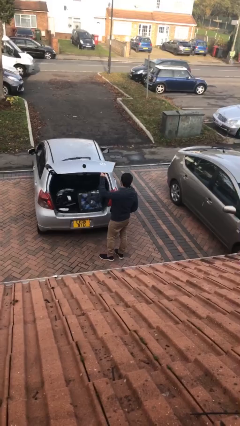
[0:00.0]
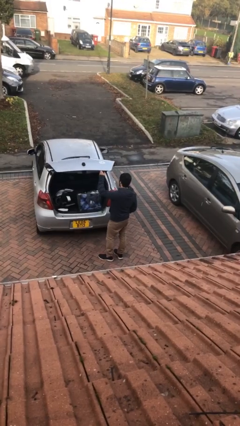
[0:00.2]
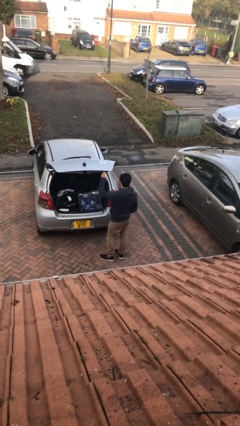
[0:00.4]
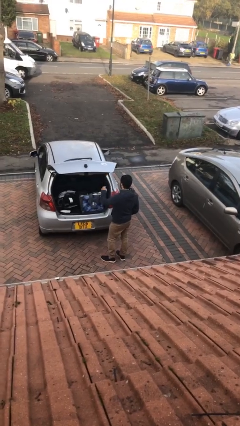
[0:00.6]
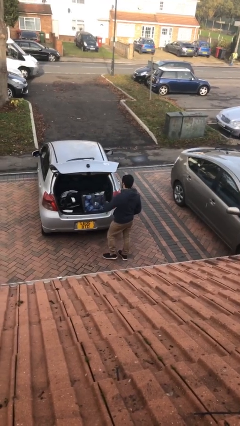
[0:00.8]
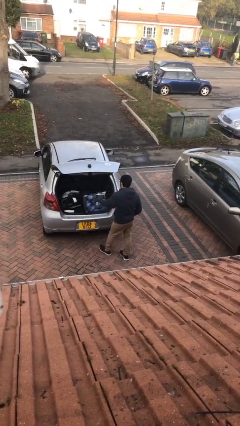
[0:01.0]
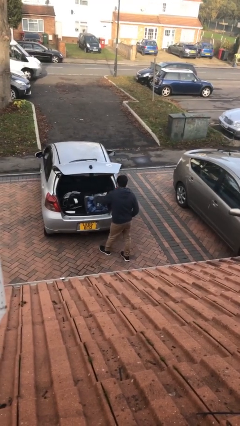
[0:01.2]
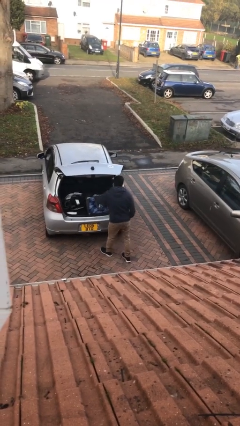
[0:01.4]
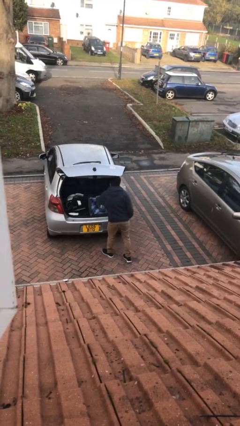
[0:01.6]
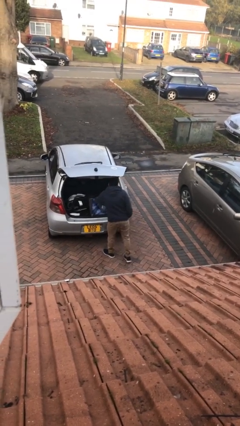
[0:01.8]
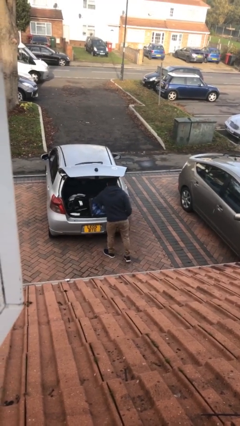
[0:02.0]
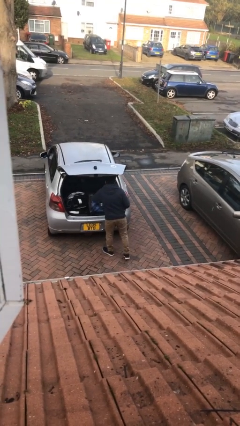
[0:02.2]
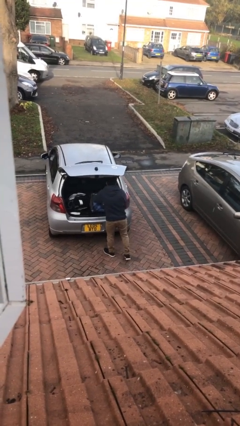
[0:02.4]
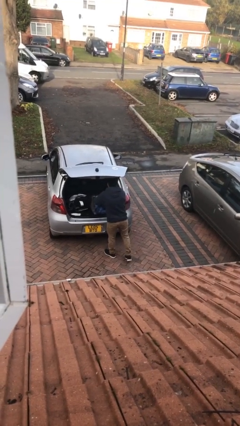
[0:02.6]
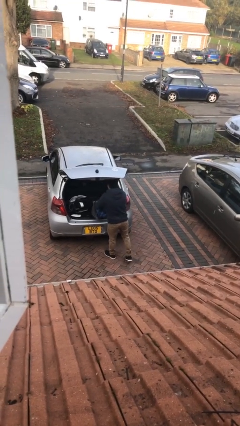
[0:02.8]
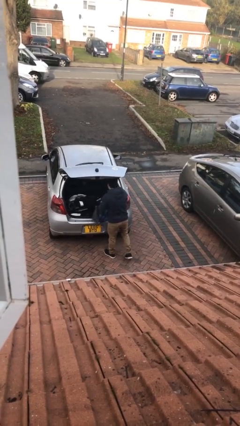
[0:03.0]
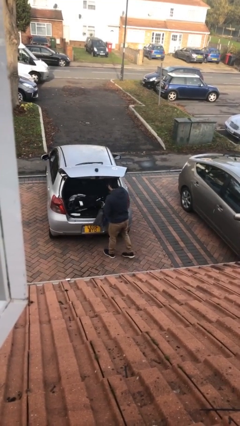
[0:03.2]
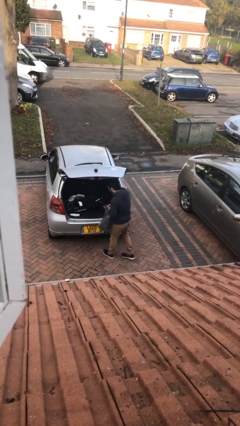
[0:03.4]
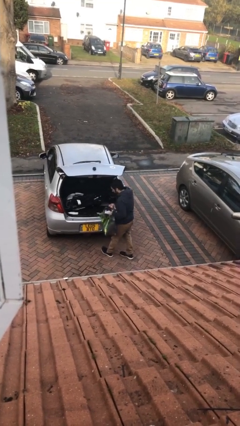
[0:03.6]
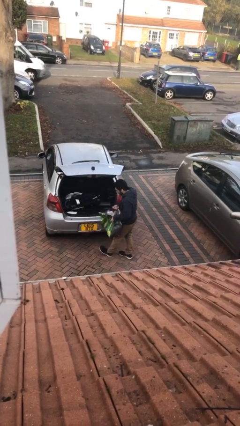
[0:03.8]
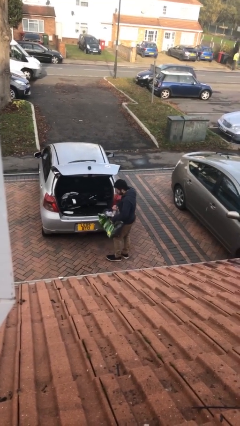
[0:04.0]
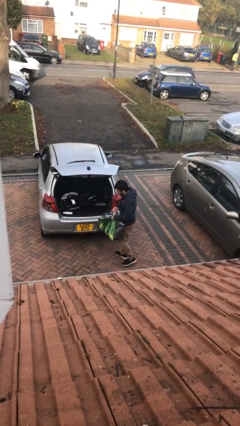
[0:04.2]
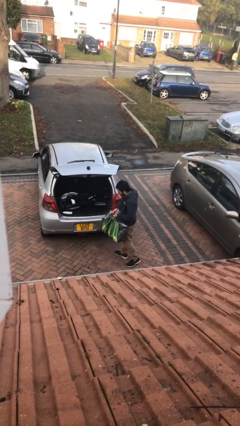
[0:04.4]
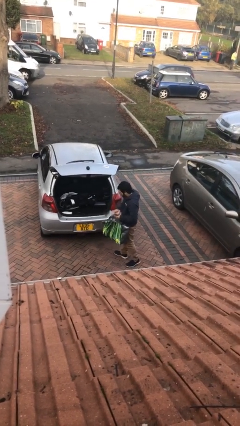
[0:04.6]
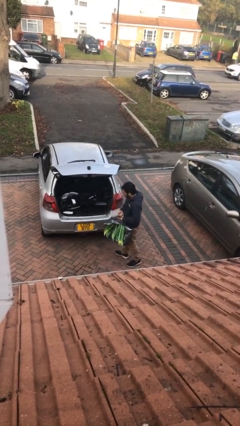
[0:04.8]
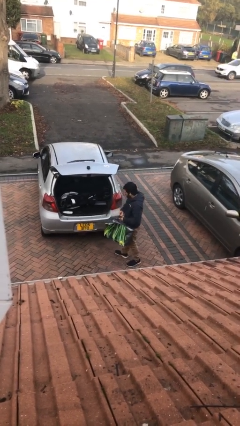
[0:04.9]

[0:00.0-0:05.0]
person unloads car

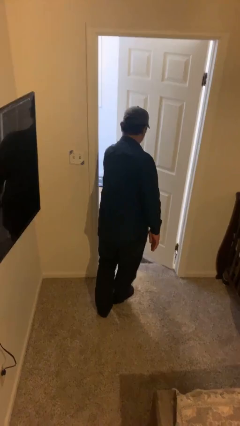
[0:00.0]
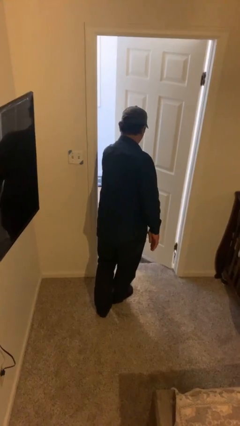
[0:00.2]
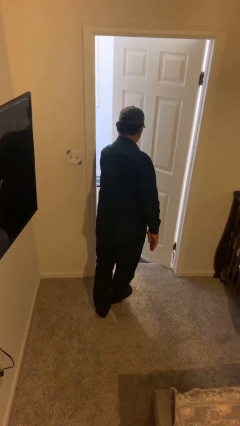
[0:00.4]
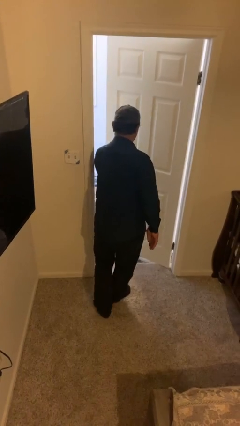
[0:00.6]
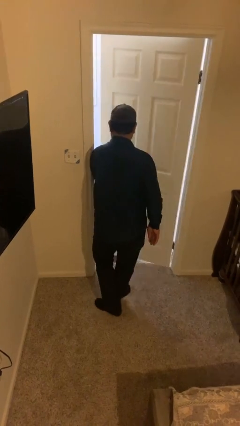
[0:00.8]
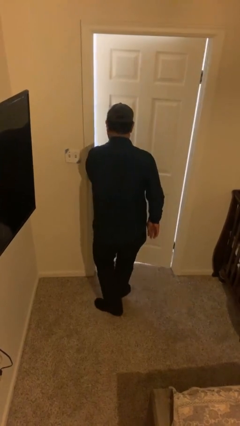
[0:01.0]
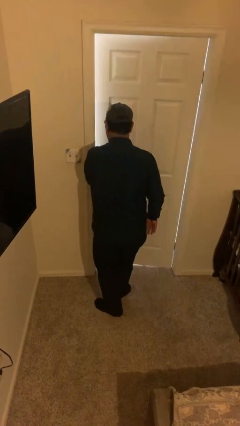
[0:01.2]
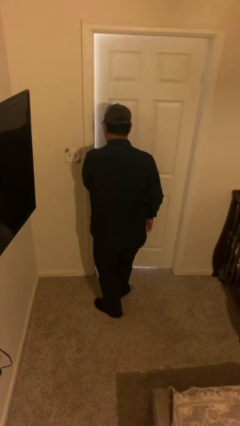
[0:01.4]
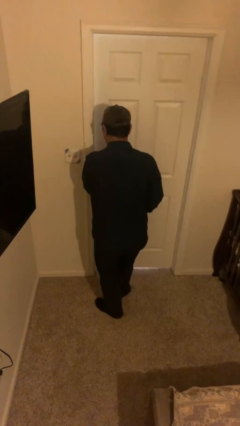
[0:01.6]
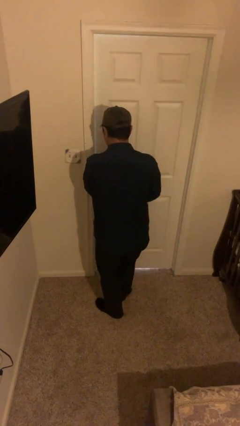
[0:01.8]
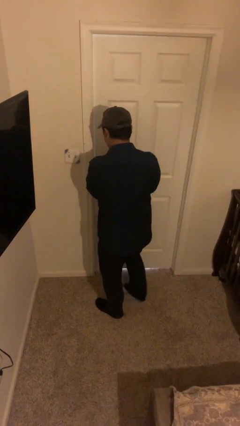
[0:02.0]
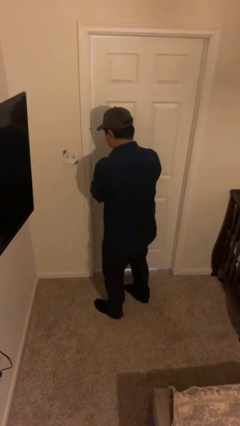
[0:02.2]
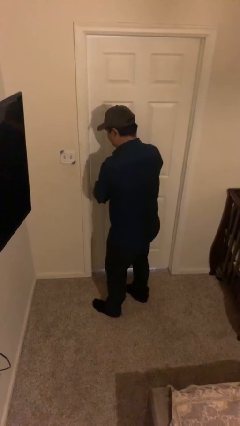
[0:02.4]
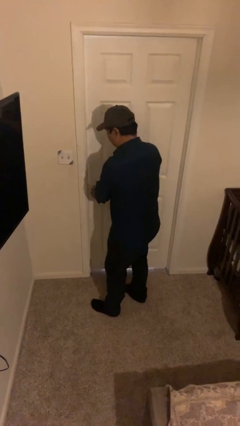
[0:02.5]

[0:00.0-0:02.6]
person closes facility door

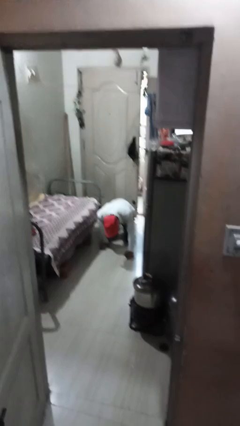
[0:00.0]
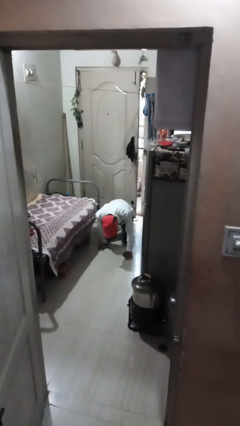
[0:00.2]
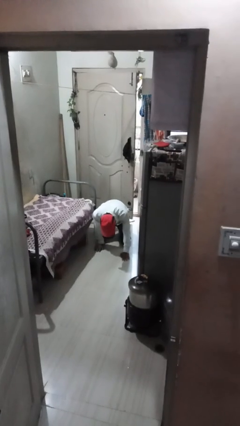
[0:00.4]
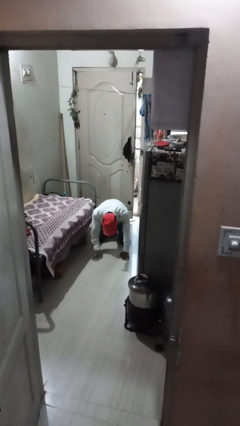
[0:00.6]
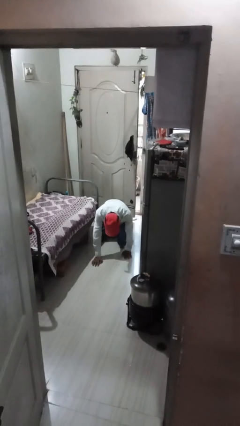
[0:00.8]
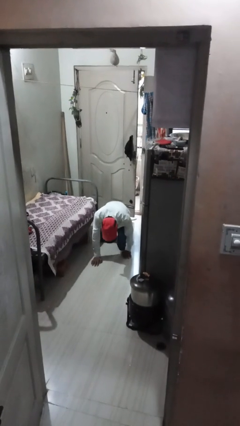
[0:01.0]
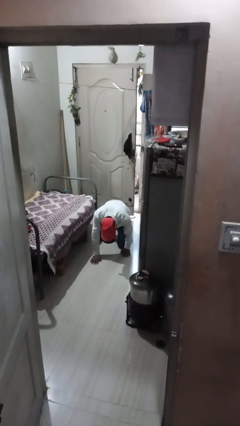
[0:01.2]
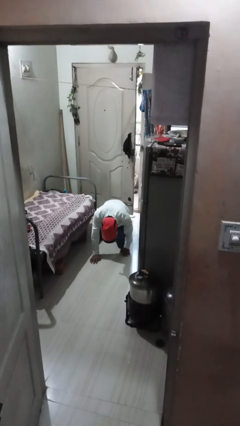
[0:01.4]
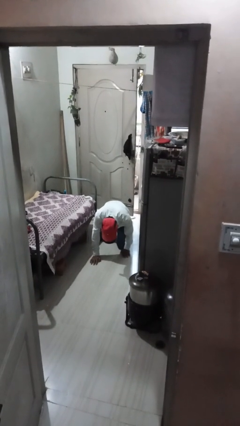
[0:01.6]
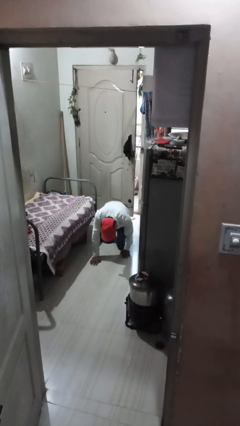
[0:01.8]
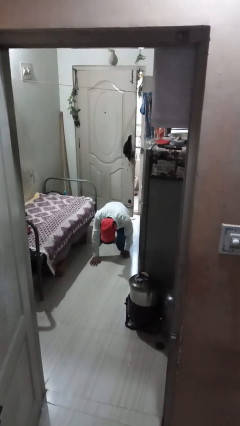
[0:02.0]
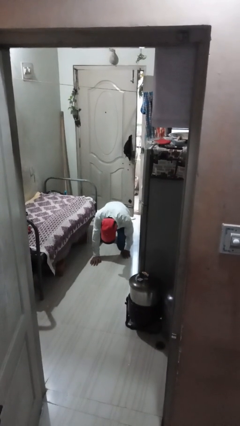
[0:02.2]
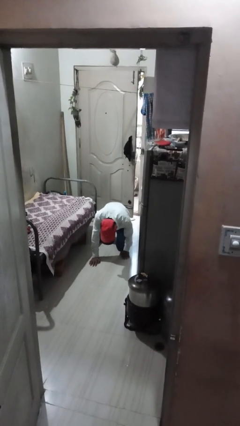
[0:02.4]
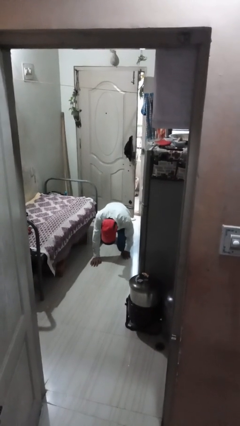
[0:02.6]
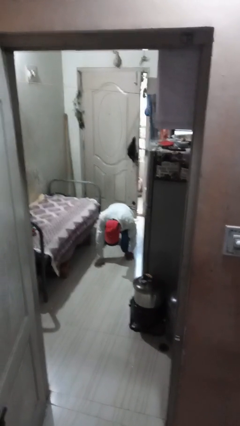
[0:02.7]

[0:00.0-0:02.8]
person crawls

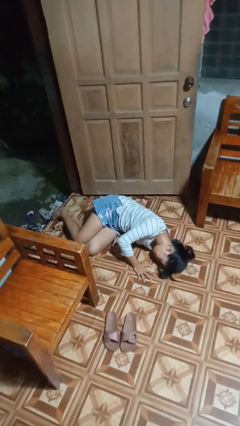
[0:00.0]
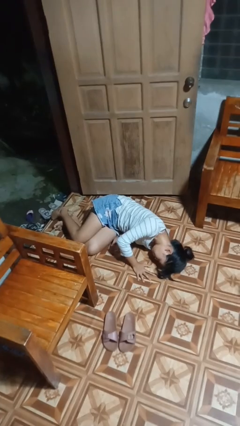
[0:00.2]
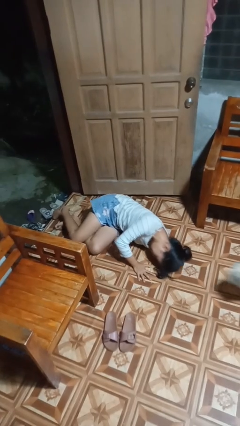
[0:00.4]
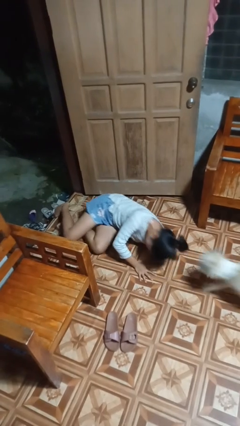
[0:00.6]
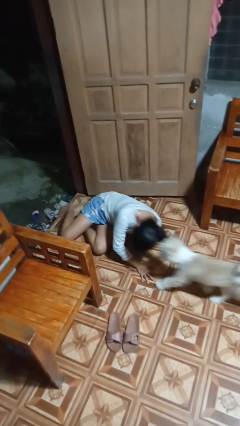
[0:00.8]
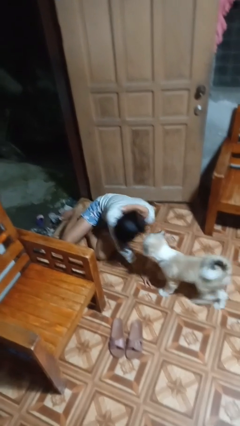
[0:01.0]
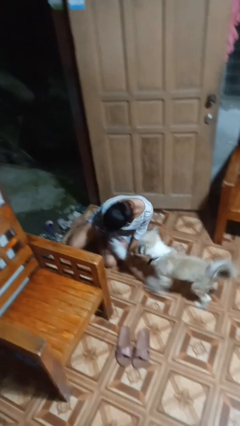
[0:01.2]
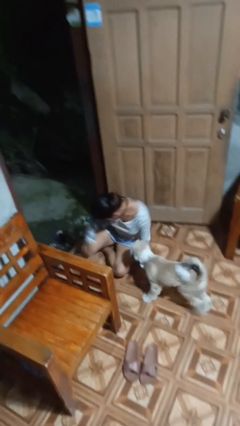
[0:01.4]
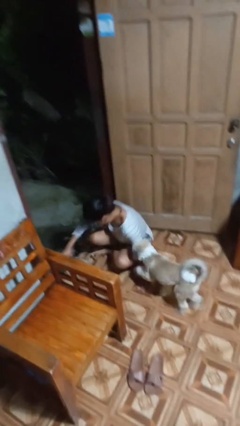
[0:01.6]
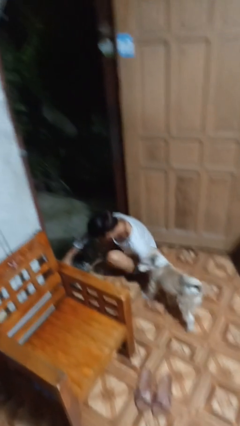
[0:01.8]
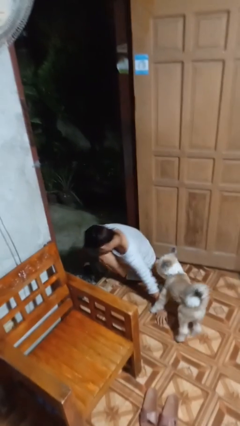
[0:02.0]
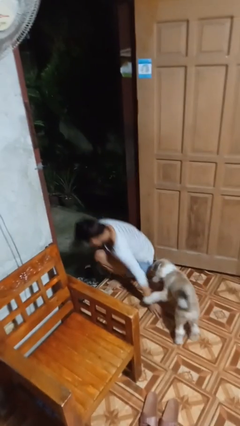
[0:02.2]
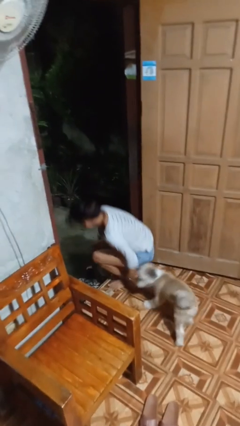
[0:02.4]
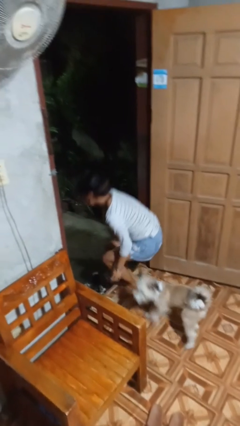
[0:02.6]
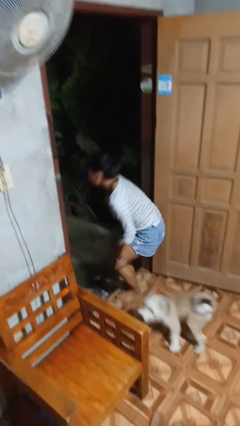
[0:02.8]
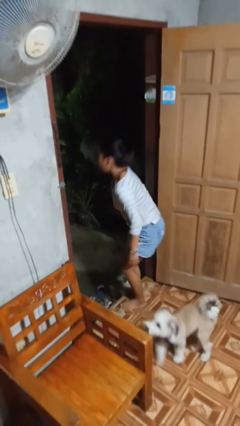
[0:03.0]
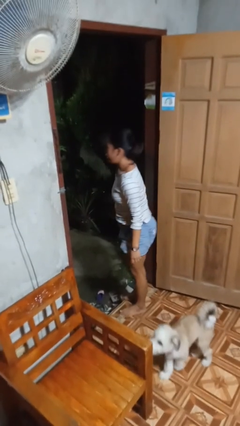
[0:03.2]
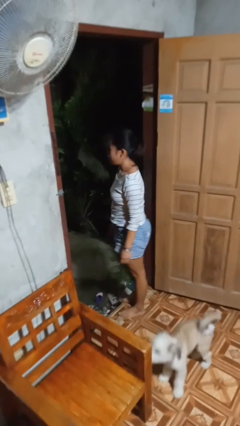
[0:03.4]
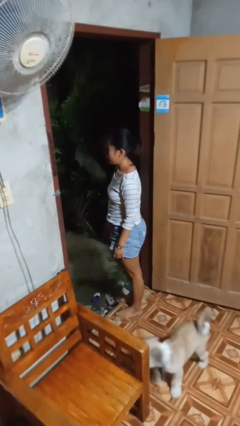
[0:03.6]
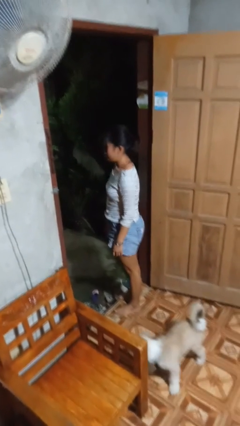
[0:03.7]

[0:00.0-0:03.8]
person stands up from floor

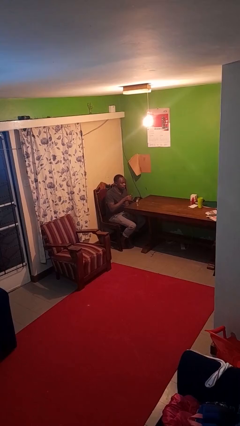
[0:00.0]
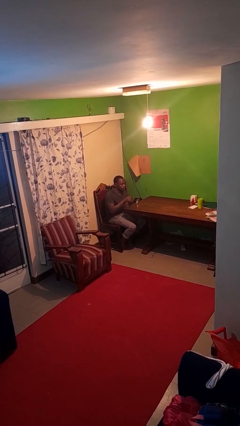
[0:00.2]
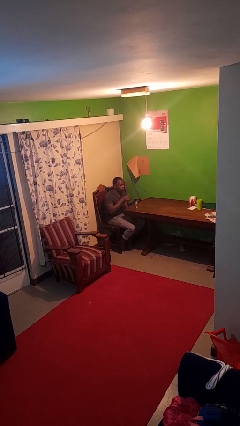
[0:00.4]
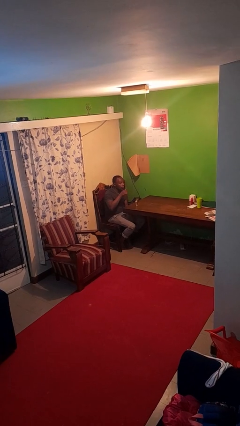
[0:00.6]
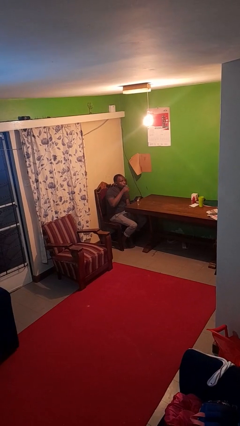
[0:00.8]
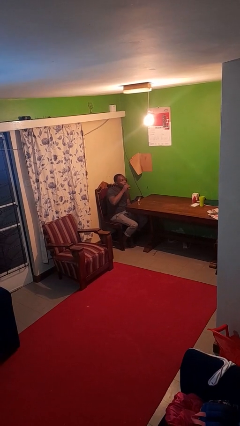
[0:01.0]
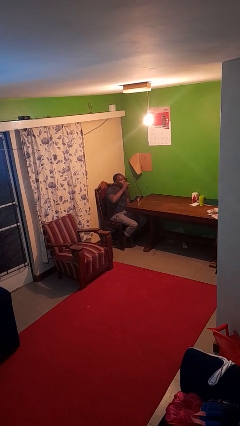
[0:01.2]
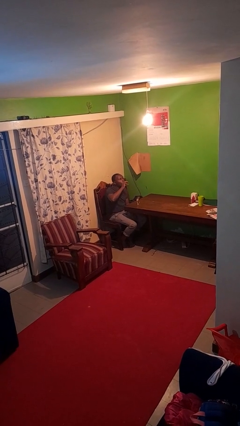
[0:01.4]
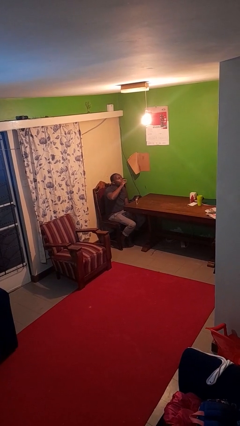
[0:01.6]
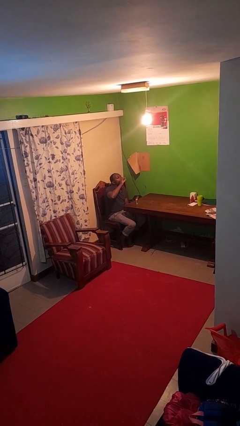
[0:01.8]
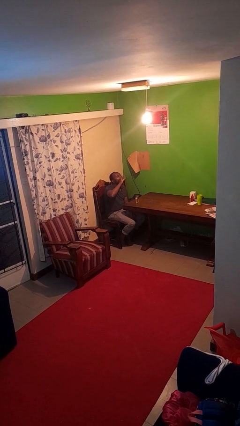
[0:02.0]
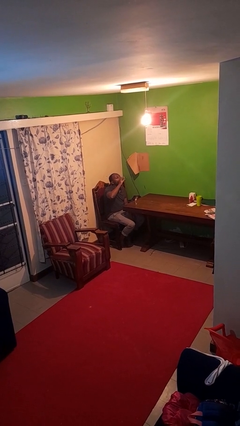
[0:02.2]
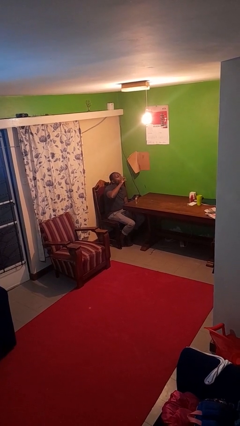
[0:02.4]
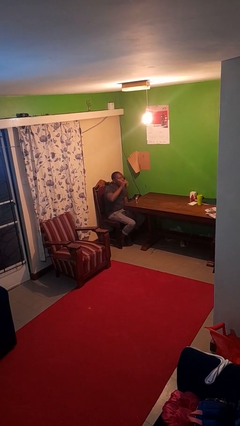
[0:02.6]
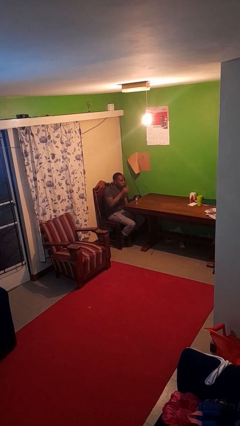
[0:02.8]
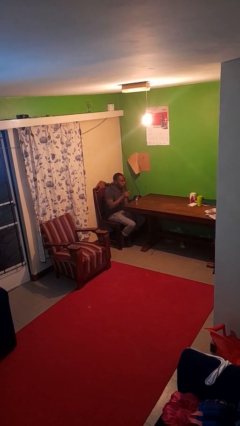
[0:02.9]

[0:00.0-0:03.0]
person drinks from shotglass

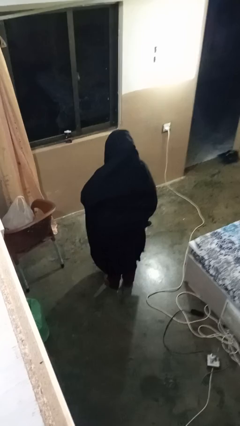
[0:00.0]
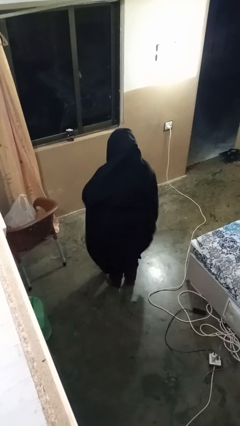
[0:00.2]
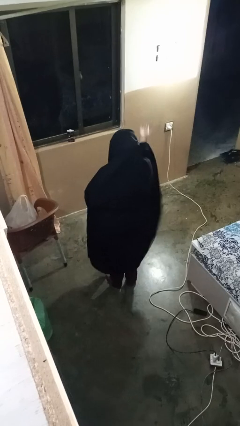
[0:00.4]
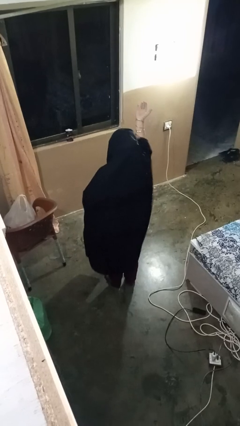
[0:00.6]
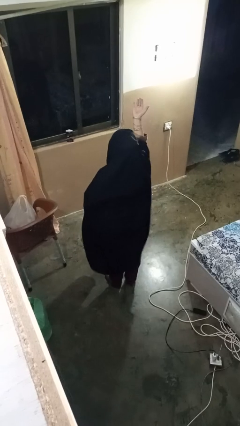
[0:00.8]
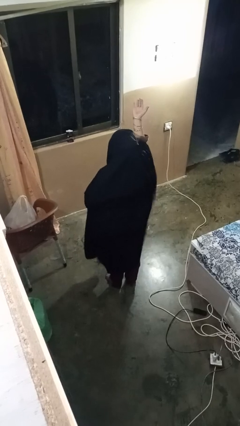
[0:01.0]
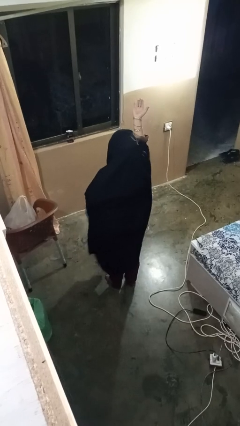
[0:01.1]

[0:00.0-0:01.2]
person gestures swipe up
